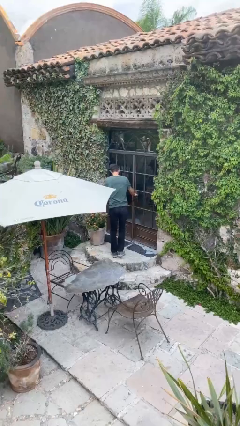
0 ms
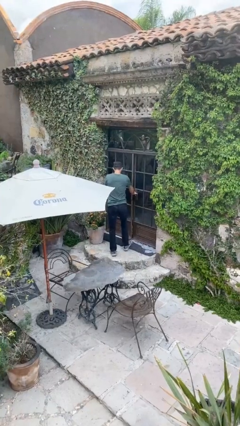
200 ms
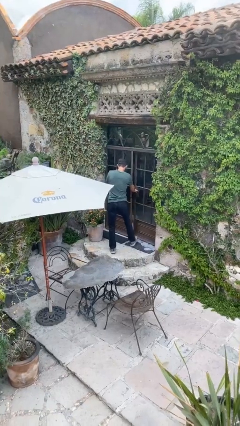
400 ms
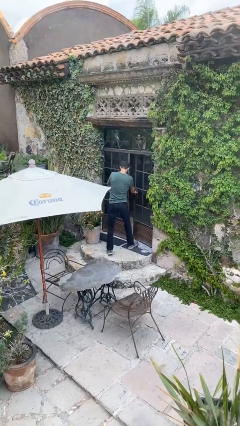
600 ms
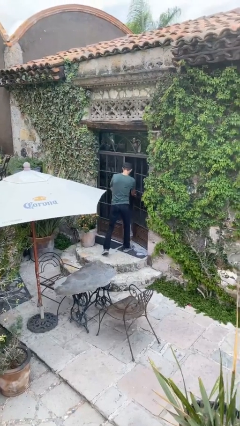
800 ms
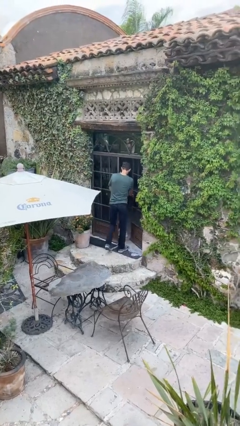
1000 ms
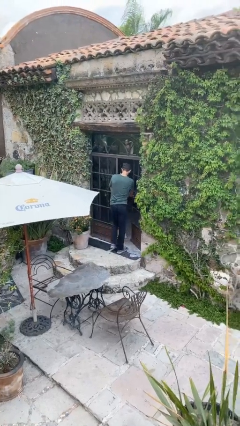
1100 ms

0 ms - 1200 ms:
person opens facility door

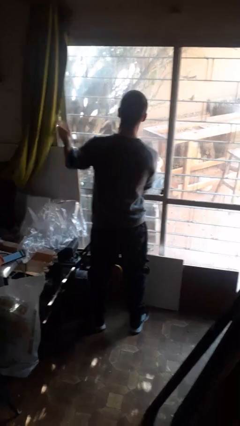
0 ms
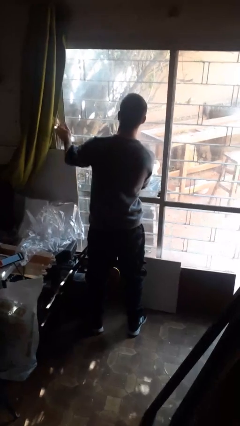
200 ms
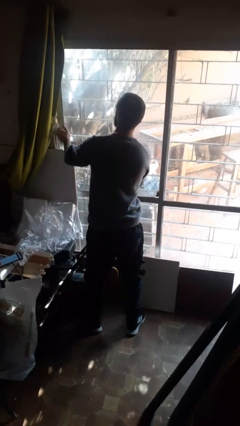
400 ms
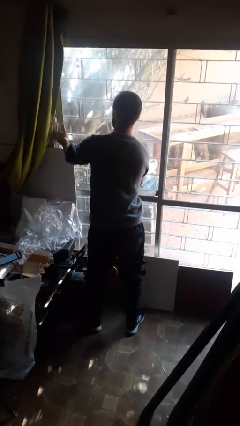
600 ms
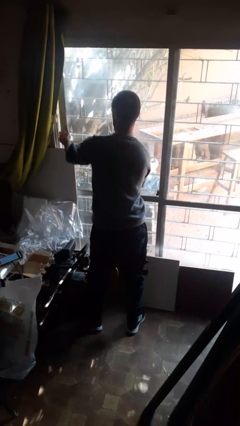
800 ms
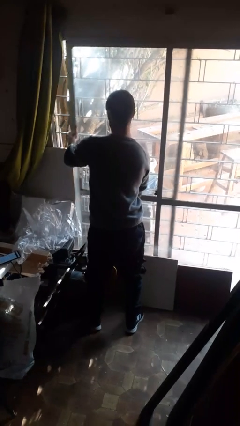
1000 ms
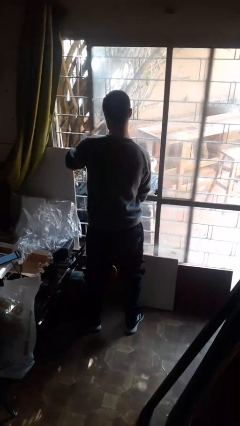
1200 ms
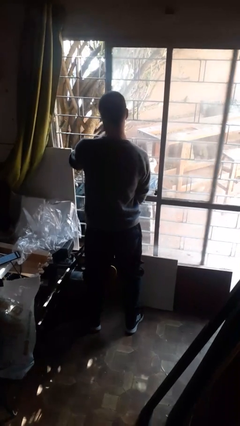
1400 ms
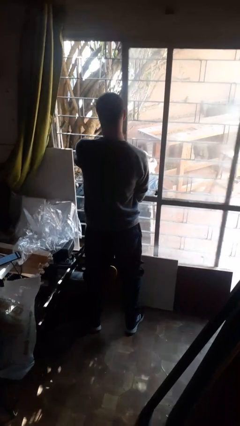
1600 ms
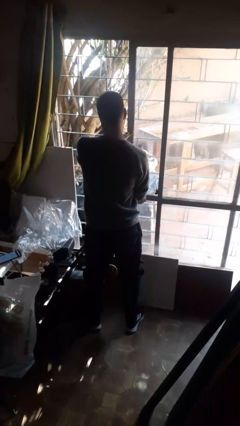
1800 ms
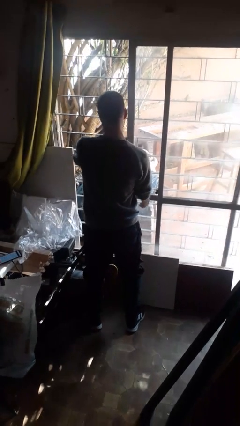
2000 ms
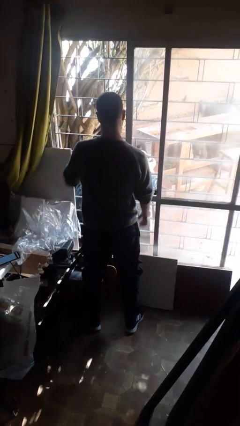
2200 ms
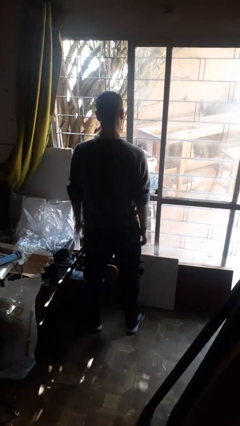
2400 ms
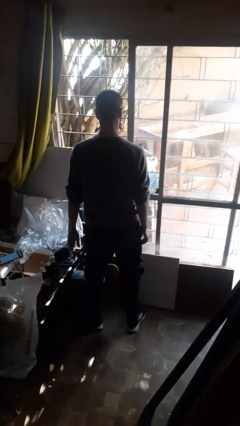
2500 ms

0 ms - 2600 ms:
person opens sliding door

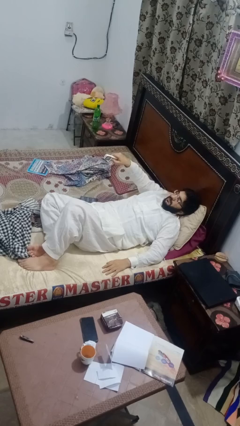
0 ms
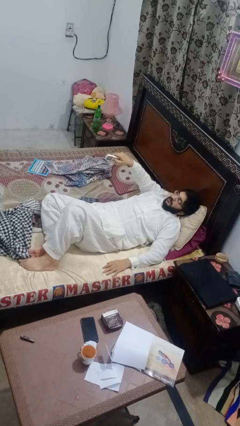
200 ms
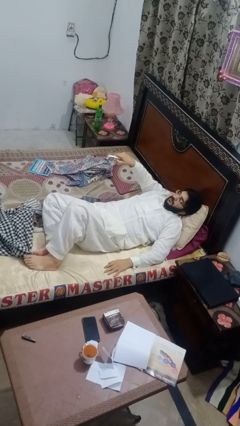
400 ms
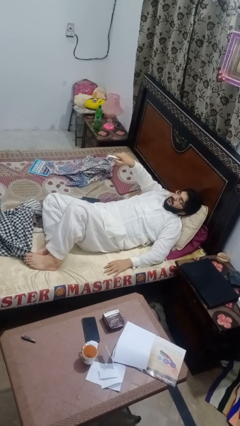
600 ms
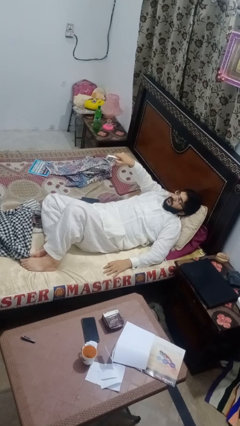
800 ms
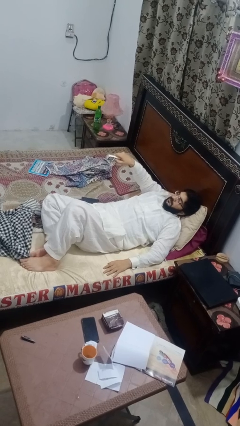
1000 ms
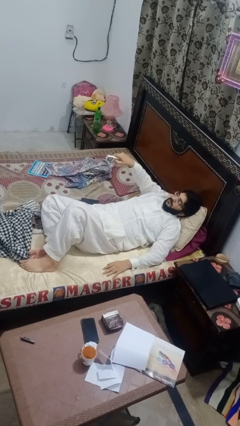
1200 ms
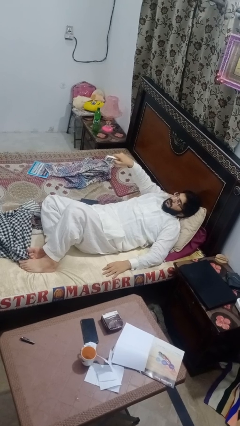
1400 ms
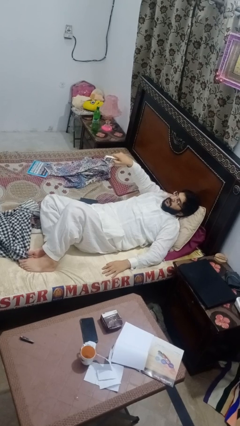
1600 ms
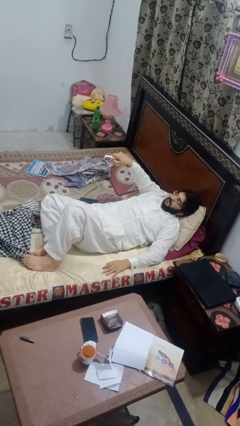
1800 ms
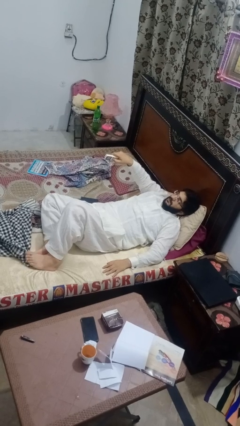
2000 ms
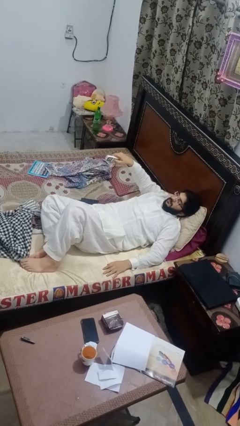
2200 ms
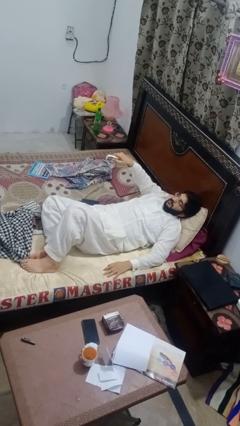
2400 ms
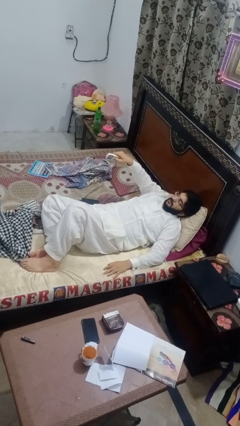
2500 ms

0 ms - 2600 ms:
person uses television remote

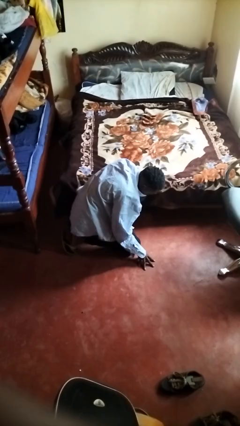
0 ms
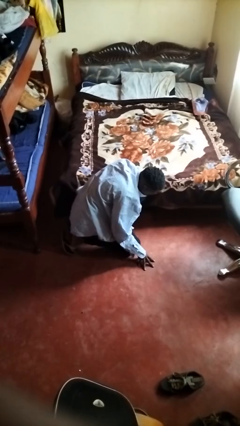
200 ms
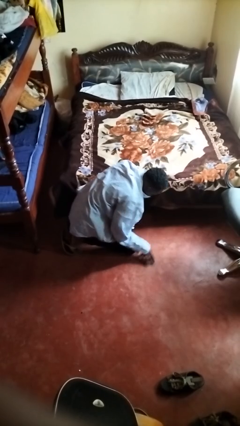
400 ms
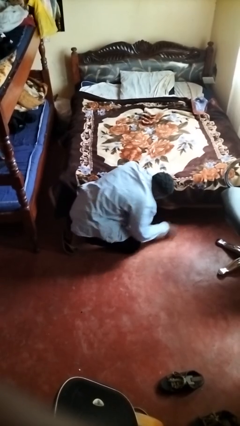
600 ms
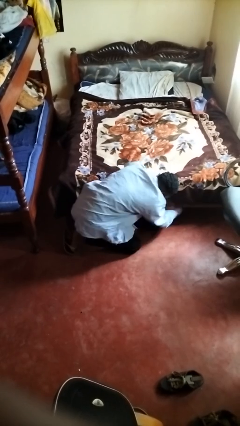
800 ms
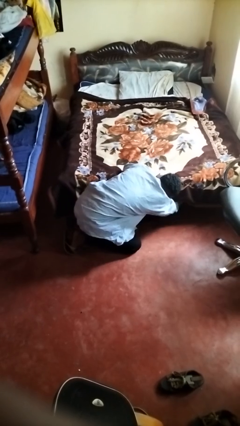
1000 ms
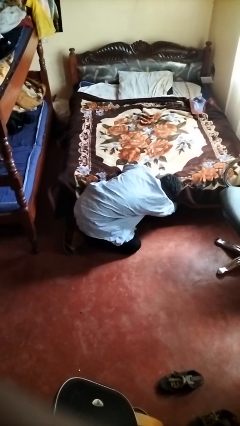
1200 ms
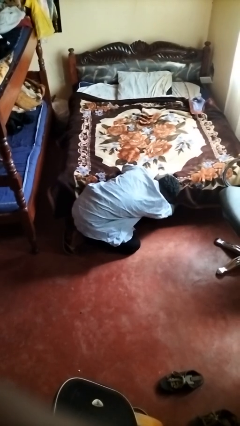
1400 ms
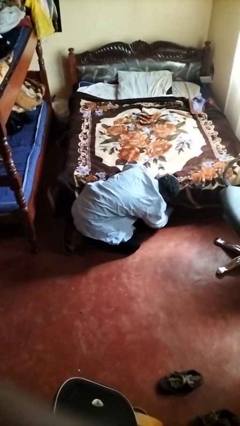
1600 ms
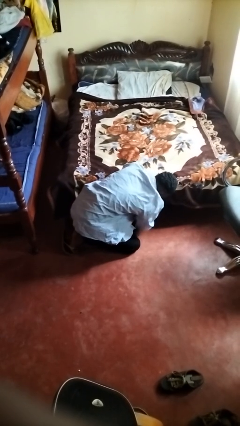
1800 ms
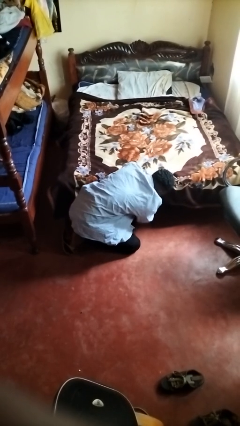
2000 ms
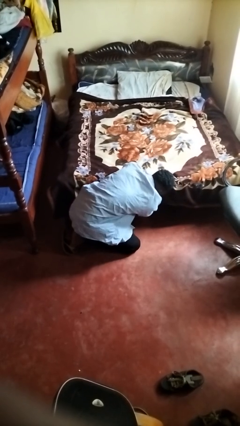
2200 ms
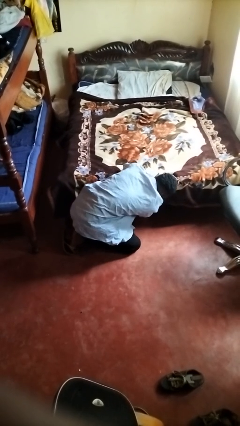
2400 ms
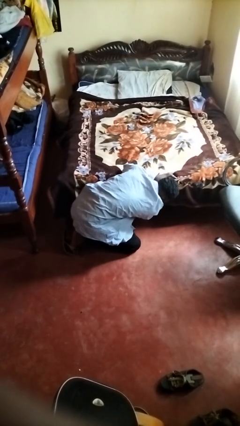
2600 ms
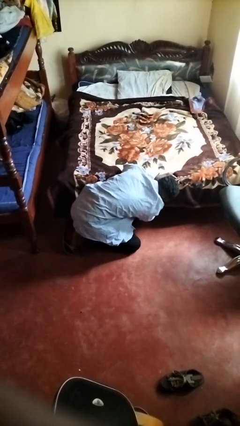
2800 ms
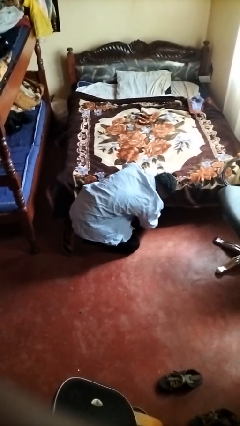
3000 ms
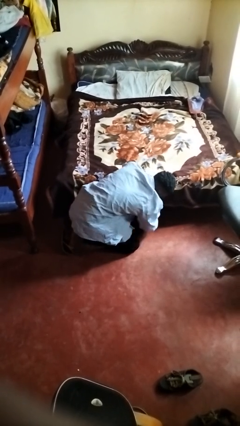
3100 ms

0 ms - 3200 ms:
person searches under bed

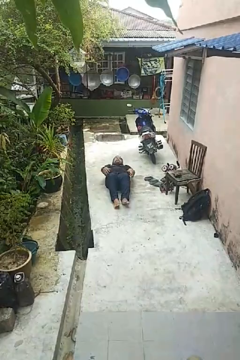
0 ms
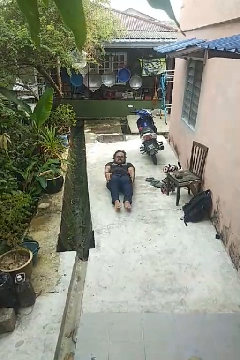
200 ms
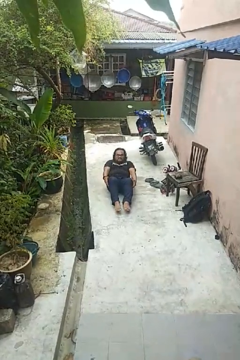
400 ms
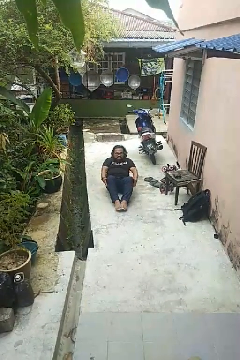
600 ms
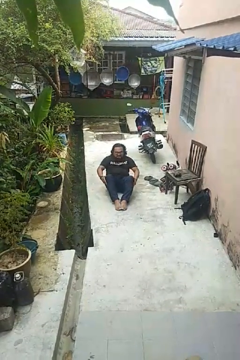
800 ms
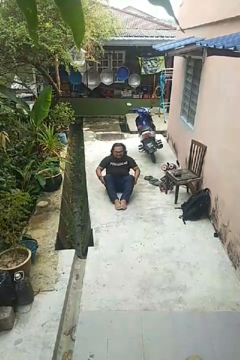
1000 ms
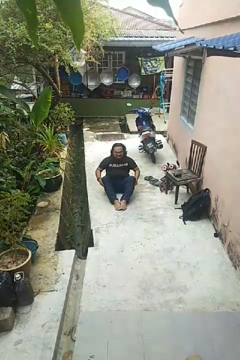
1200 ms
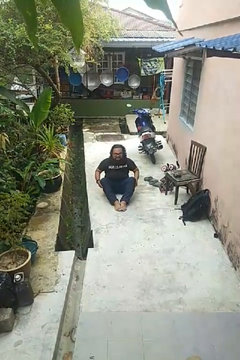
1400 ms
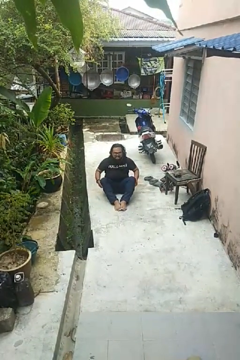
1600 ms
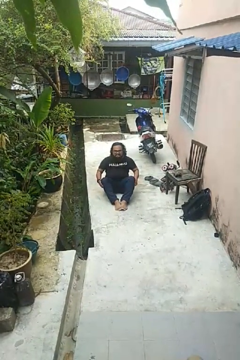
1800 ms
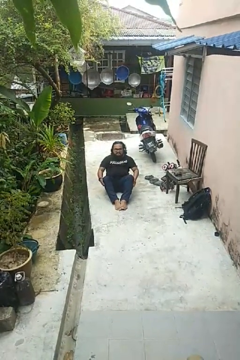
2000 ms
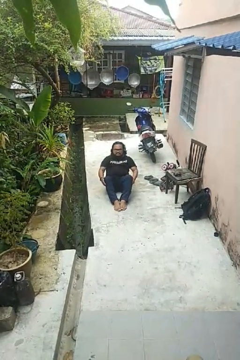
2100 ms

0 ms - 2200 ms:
person exercises with situp

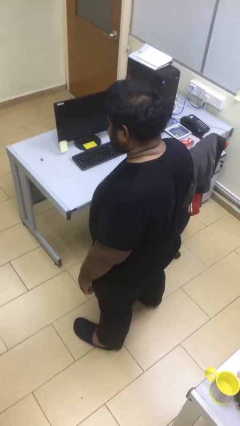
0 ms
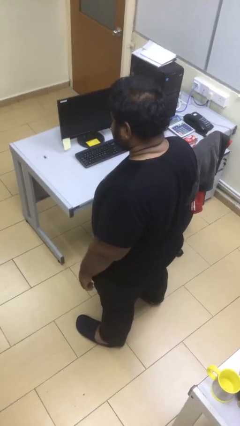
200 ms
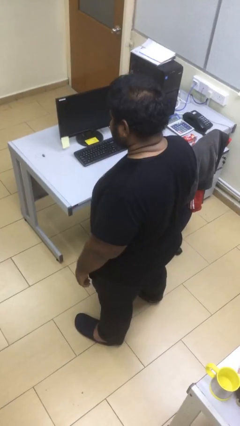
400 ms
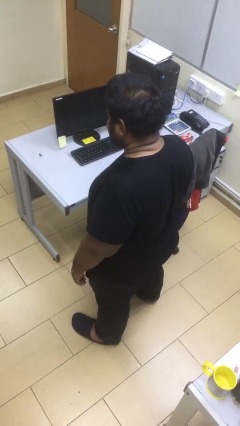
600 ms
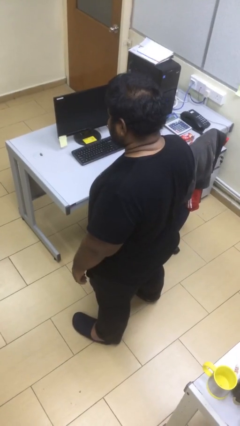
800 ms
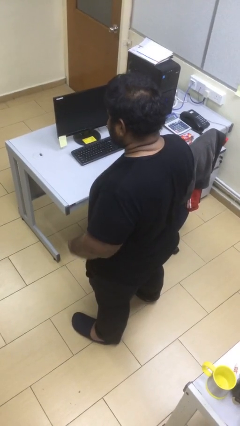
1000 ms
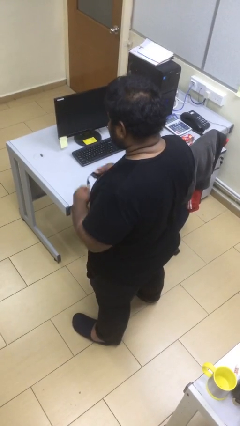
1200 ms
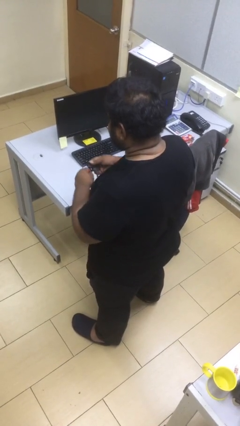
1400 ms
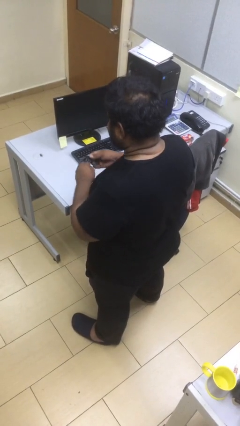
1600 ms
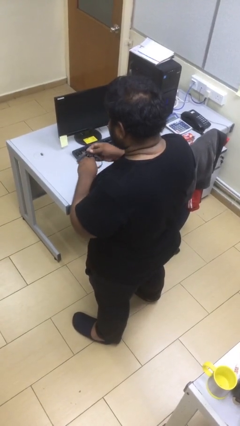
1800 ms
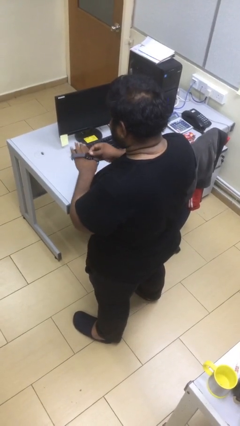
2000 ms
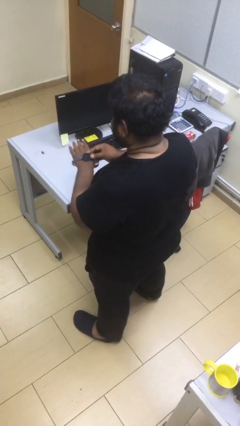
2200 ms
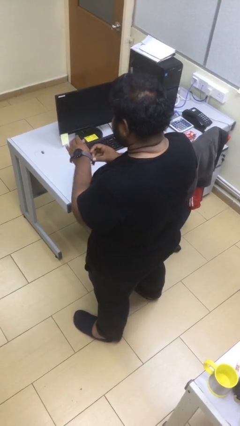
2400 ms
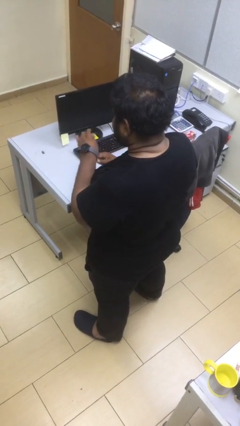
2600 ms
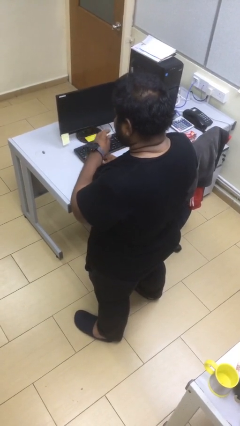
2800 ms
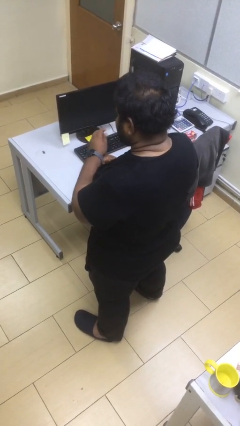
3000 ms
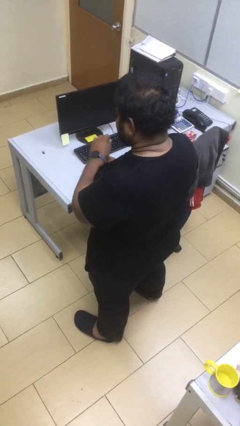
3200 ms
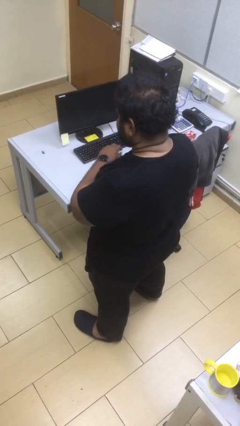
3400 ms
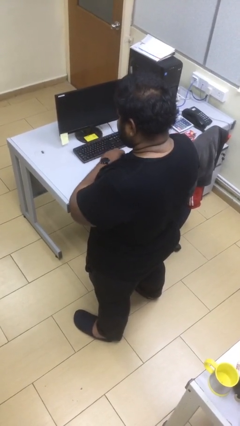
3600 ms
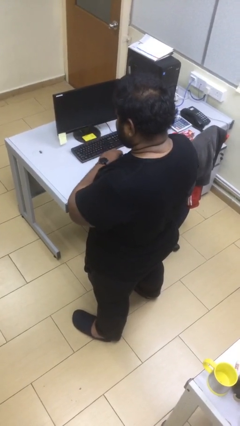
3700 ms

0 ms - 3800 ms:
person puts on wristwatch

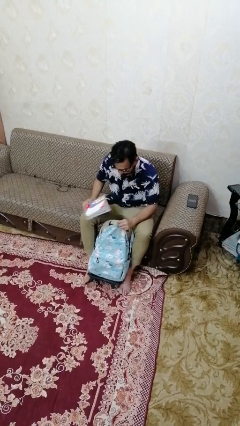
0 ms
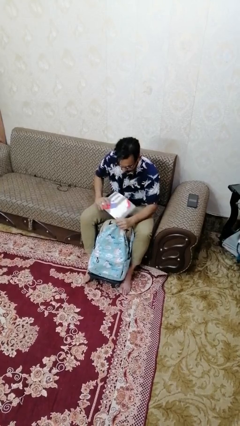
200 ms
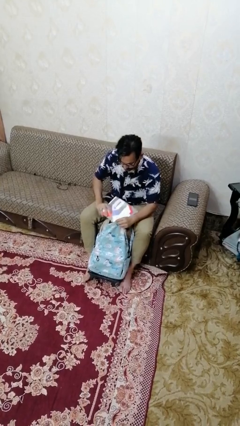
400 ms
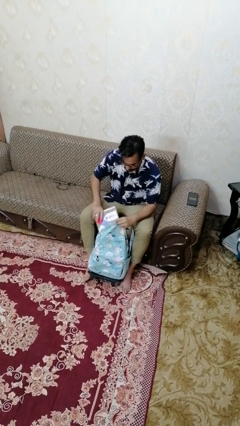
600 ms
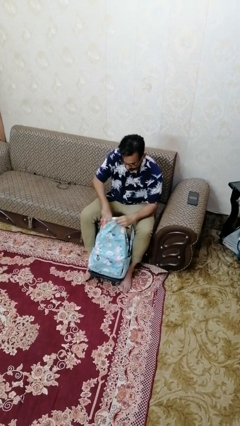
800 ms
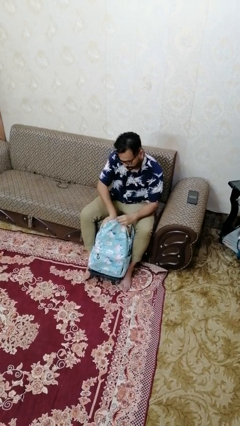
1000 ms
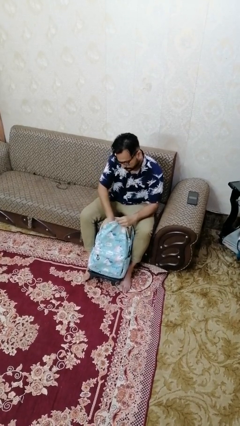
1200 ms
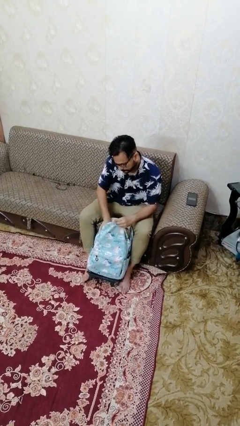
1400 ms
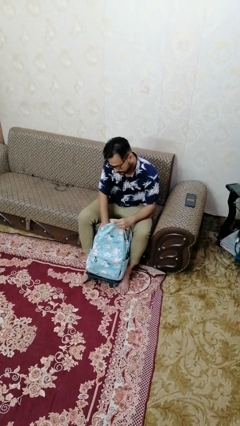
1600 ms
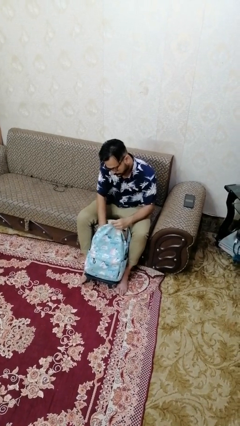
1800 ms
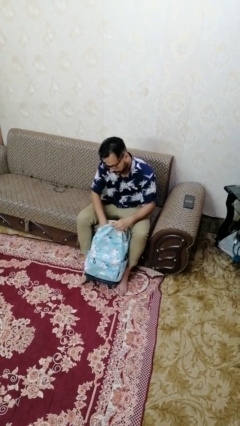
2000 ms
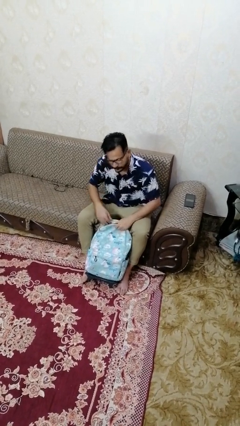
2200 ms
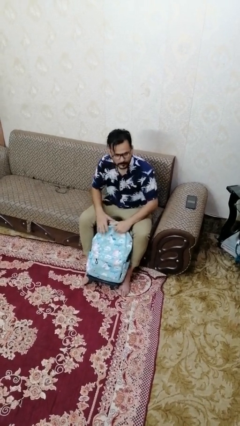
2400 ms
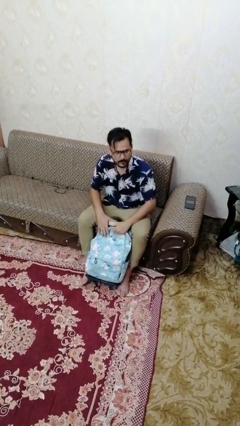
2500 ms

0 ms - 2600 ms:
person puts object into backpack
